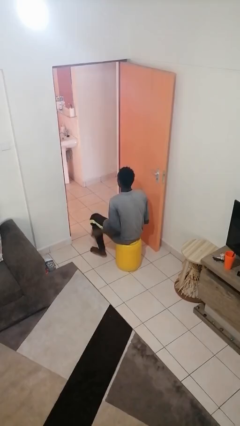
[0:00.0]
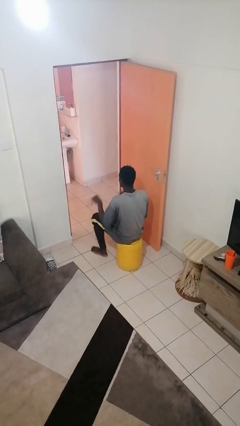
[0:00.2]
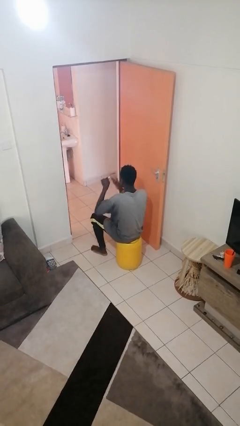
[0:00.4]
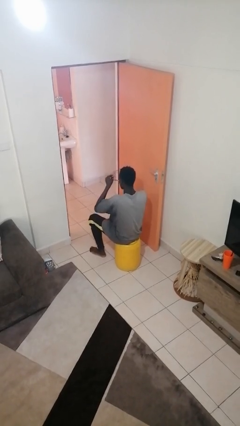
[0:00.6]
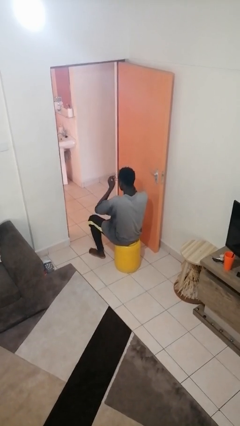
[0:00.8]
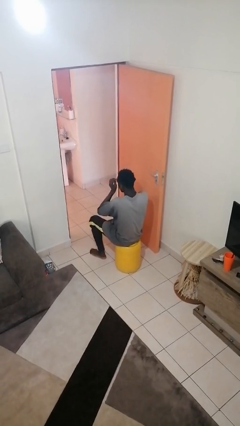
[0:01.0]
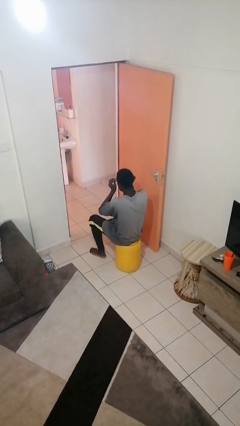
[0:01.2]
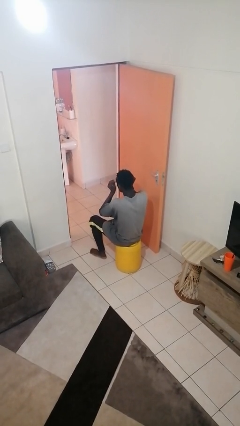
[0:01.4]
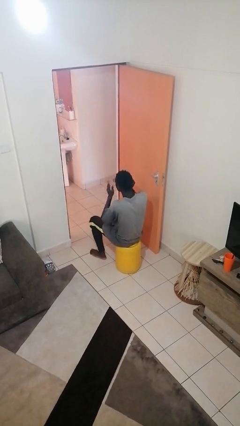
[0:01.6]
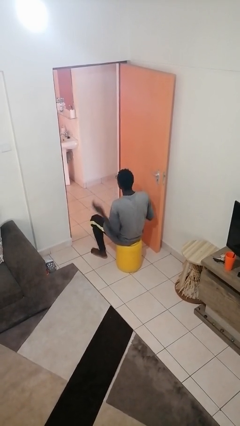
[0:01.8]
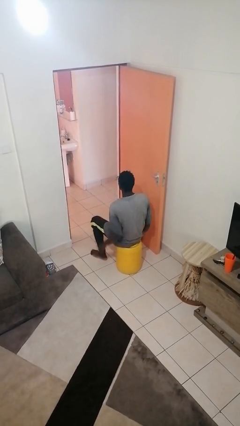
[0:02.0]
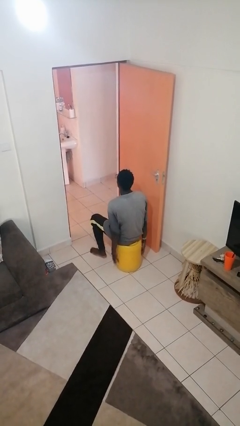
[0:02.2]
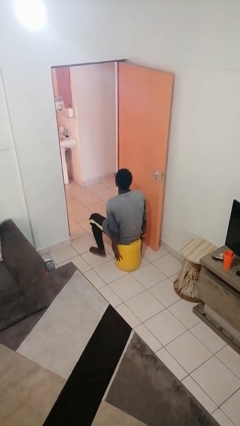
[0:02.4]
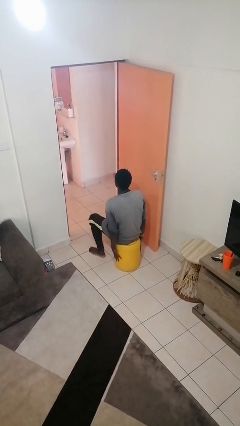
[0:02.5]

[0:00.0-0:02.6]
person puts on glasses

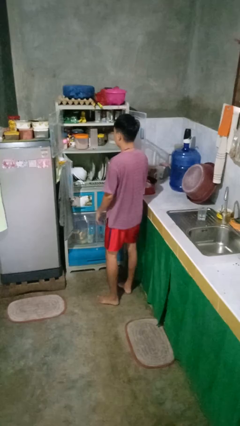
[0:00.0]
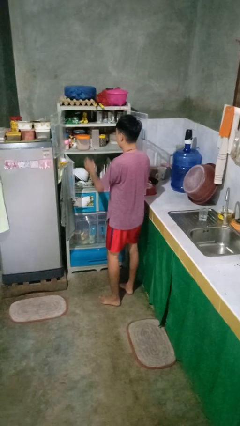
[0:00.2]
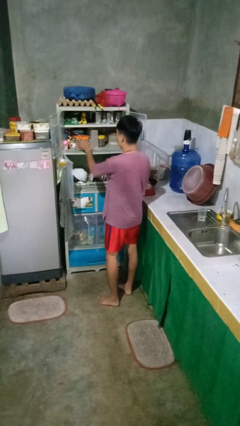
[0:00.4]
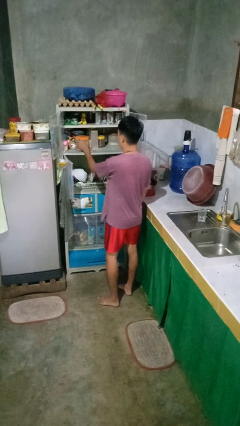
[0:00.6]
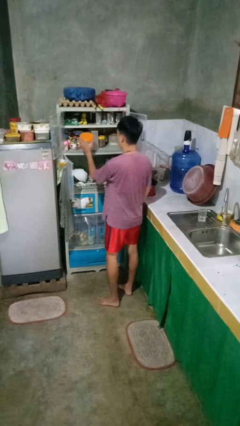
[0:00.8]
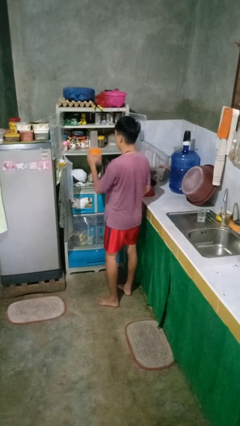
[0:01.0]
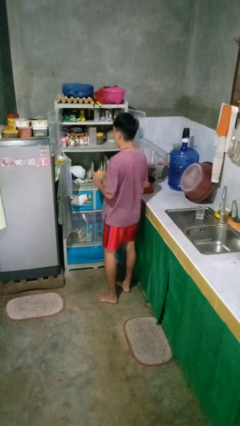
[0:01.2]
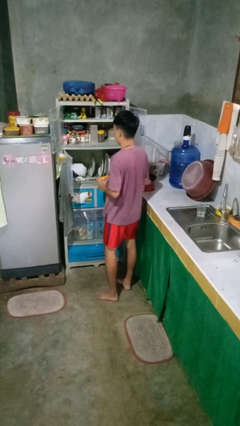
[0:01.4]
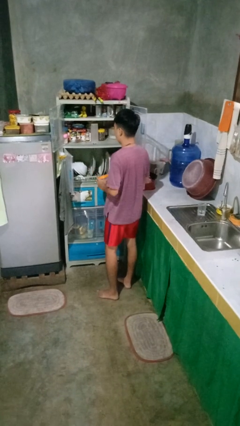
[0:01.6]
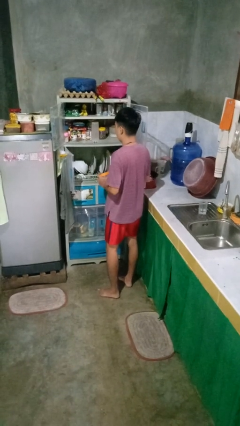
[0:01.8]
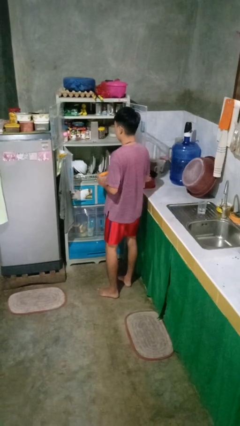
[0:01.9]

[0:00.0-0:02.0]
person takes object from cabinet

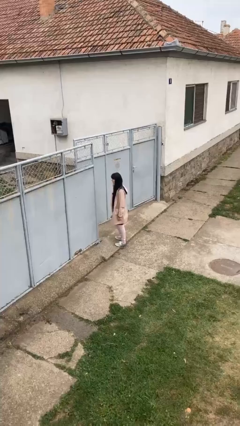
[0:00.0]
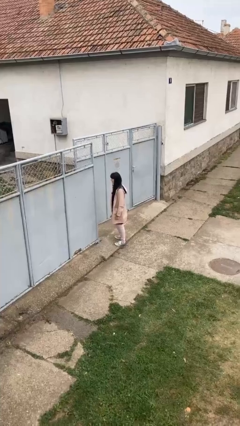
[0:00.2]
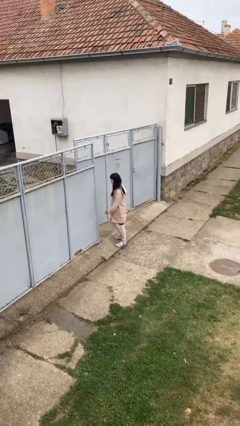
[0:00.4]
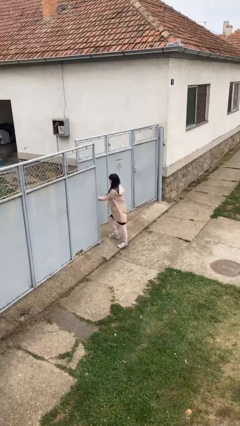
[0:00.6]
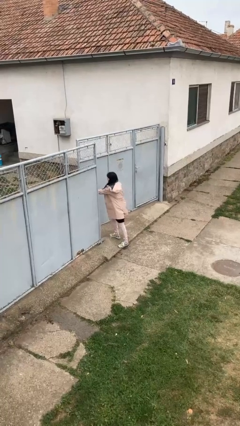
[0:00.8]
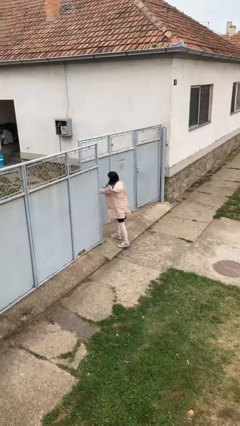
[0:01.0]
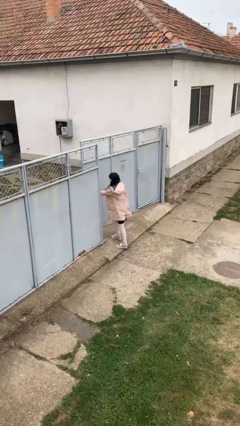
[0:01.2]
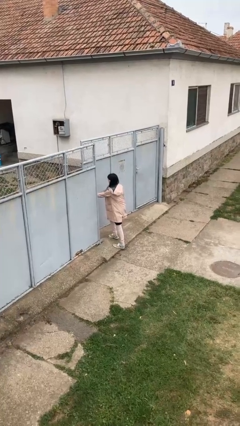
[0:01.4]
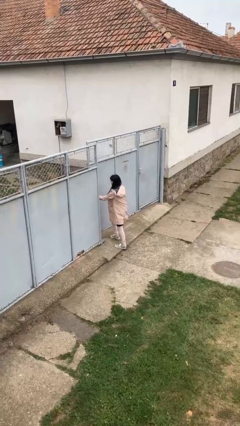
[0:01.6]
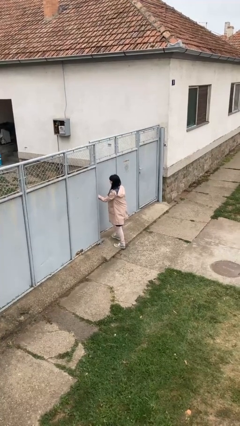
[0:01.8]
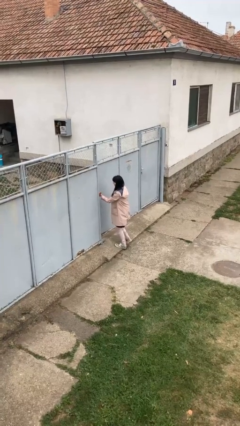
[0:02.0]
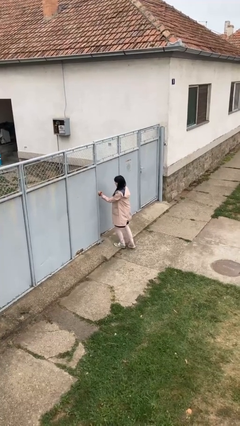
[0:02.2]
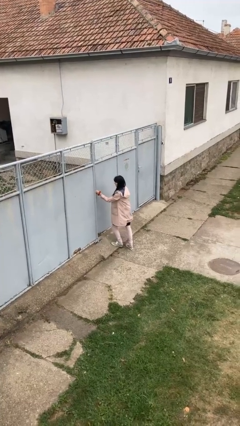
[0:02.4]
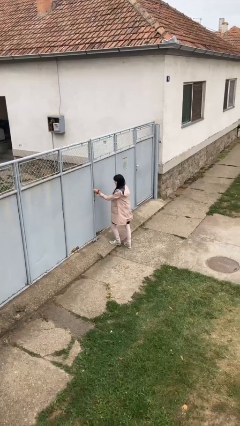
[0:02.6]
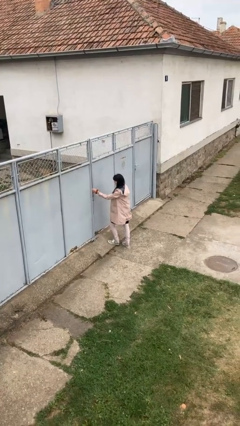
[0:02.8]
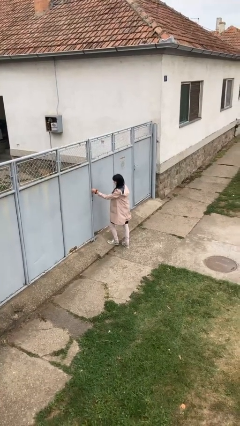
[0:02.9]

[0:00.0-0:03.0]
person closes gate

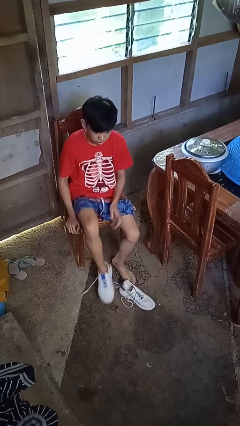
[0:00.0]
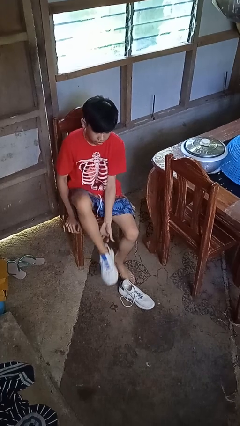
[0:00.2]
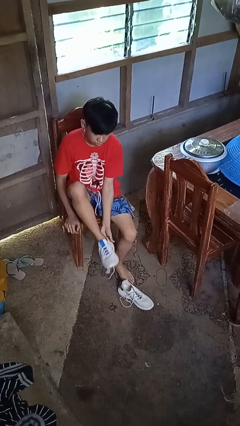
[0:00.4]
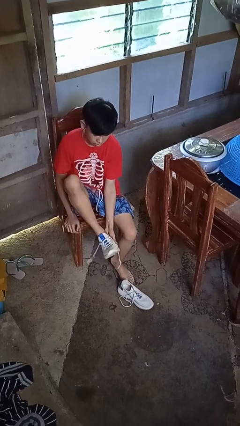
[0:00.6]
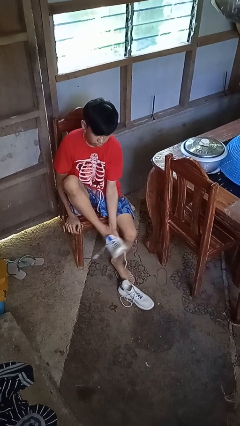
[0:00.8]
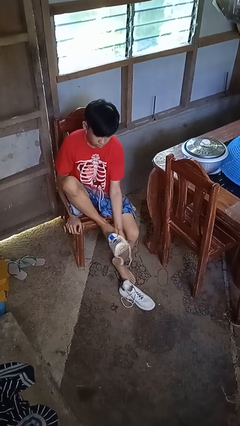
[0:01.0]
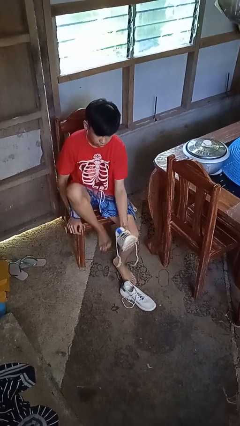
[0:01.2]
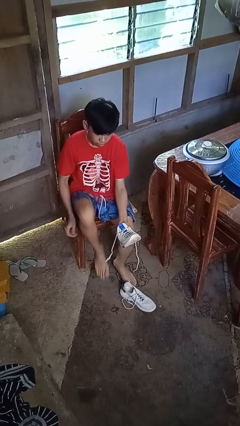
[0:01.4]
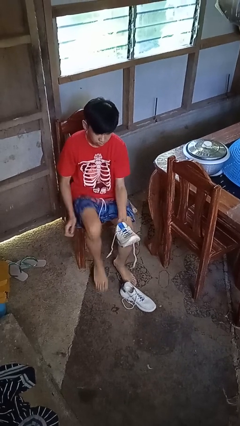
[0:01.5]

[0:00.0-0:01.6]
person takes off shoes

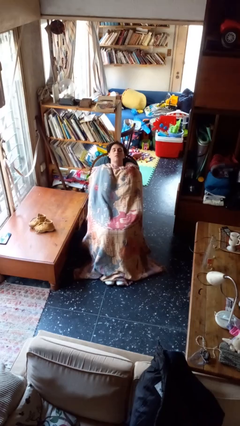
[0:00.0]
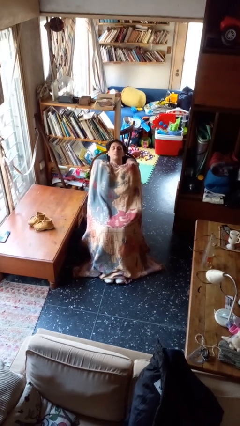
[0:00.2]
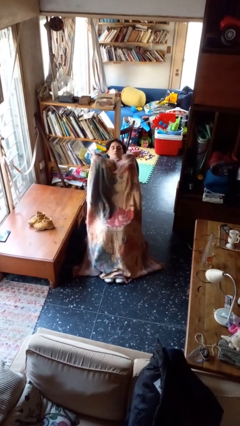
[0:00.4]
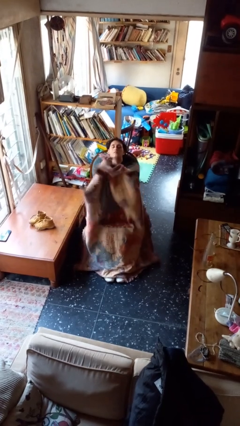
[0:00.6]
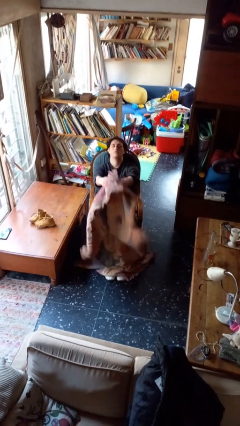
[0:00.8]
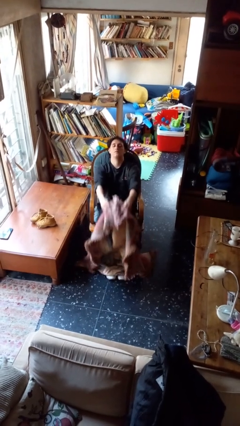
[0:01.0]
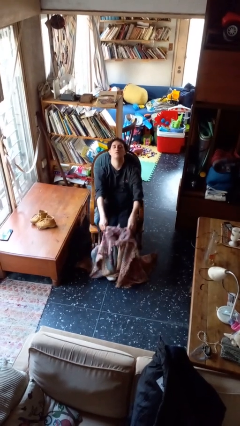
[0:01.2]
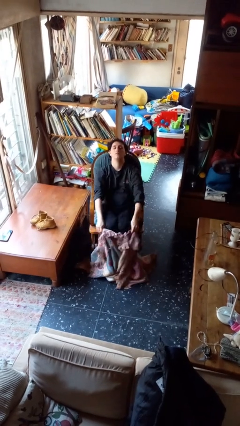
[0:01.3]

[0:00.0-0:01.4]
person uncovers with blanket

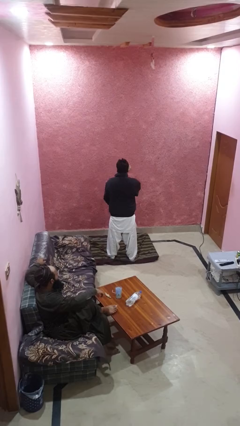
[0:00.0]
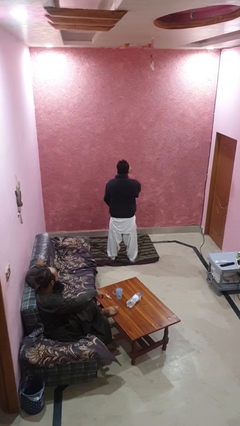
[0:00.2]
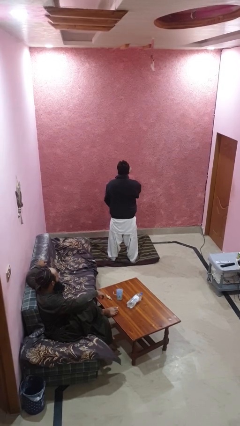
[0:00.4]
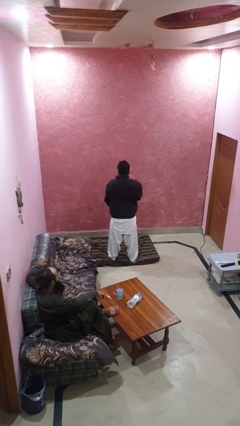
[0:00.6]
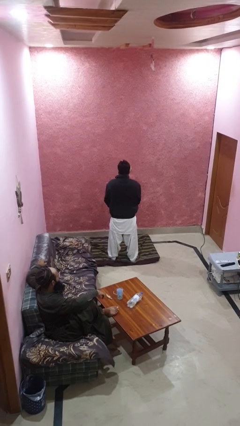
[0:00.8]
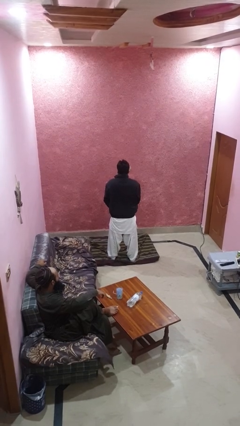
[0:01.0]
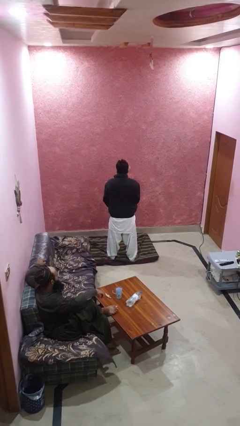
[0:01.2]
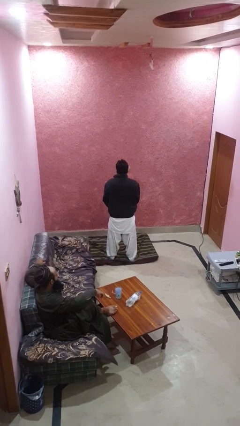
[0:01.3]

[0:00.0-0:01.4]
person unzips jacket

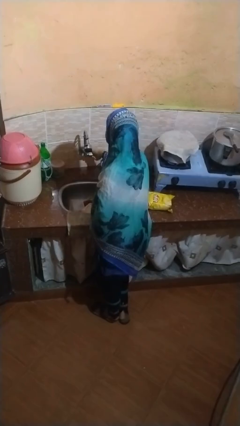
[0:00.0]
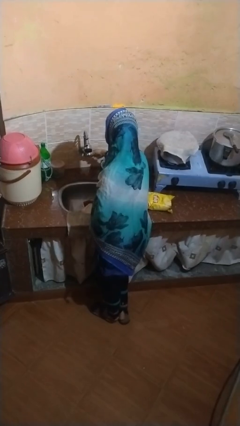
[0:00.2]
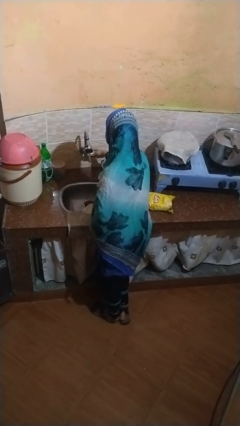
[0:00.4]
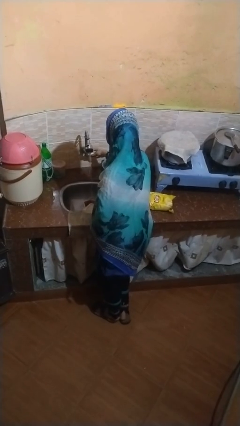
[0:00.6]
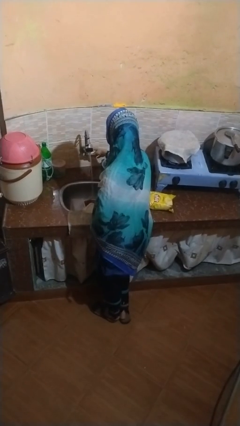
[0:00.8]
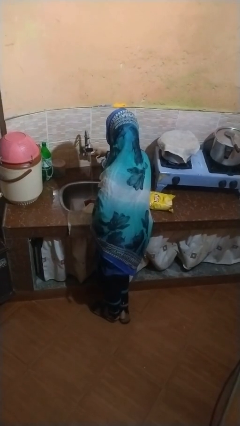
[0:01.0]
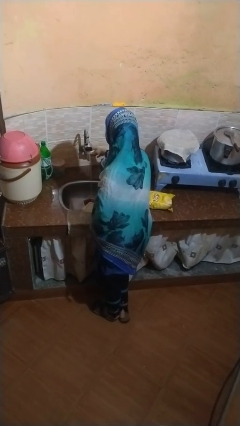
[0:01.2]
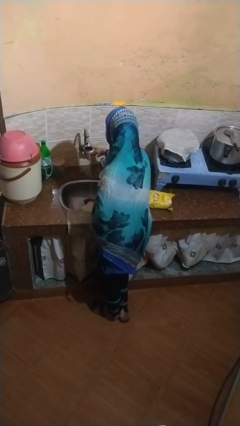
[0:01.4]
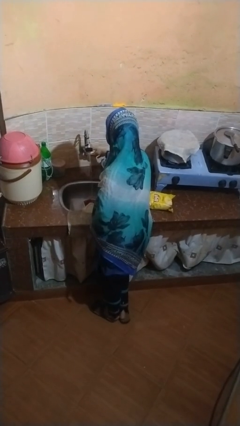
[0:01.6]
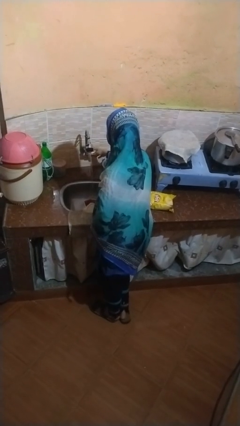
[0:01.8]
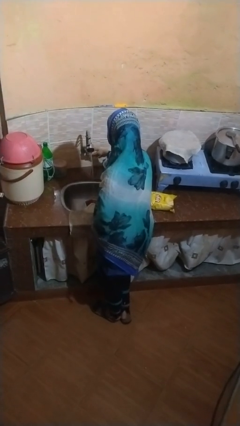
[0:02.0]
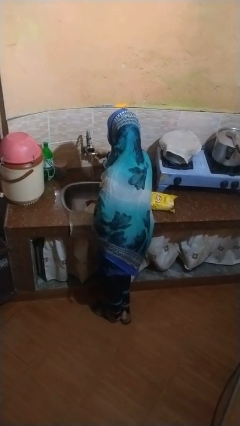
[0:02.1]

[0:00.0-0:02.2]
person turns on faucet

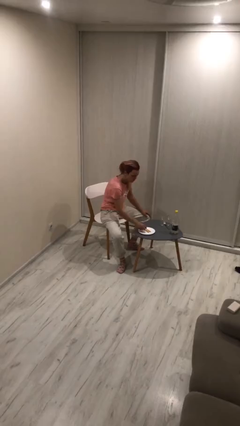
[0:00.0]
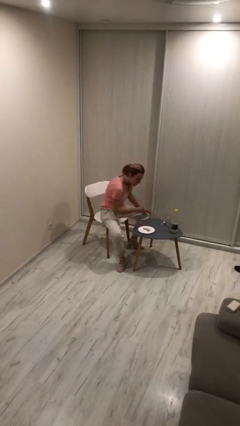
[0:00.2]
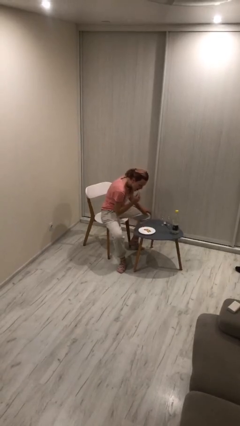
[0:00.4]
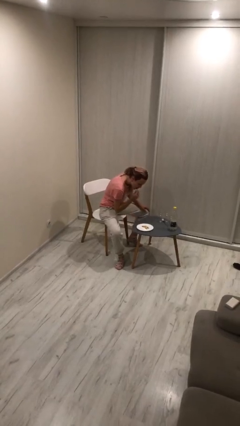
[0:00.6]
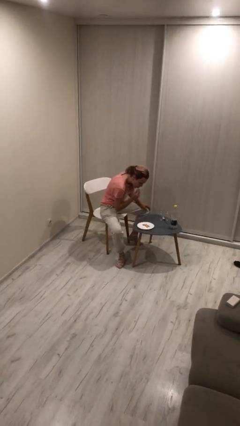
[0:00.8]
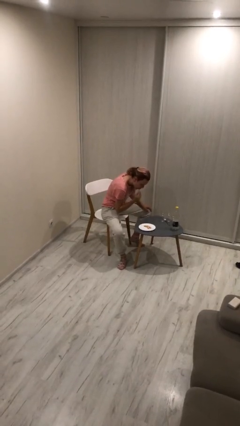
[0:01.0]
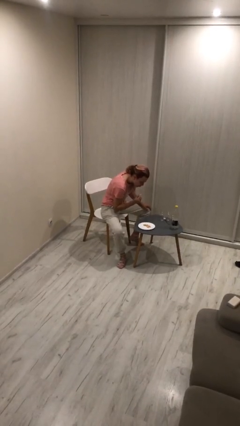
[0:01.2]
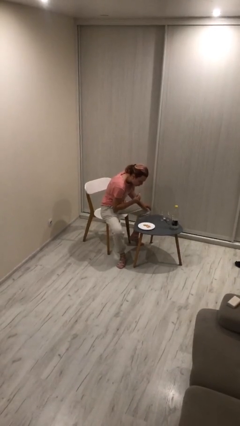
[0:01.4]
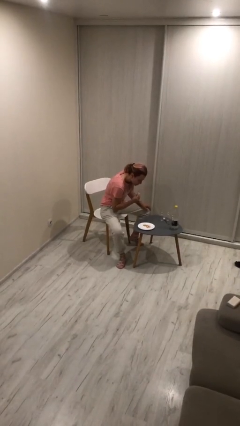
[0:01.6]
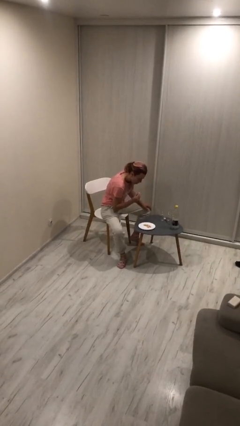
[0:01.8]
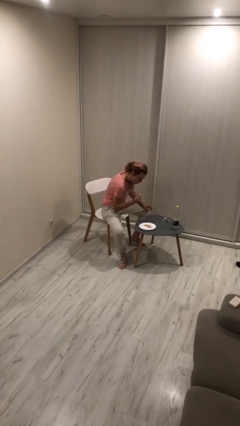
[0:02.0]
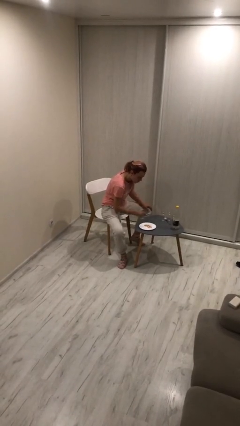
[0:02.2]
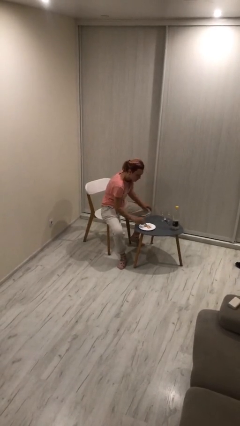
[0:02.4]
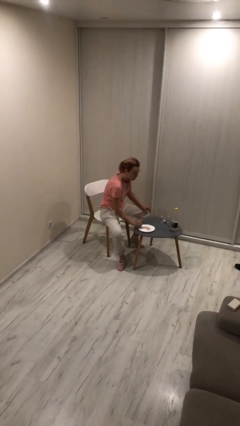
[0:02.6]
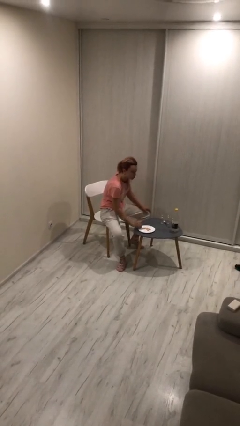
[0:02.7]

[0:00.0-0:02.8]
person eats with hands
